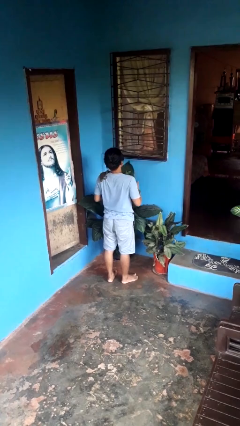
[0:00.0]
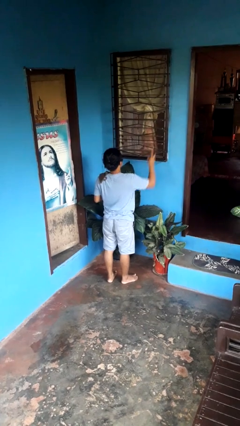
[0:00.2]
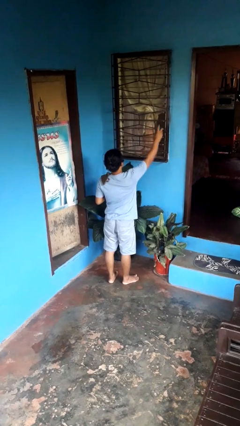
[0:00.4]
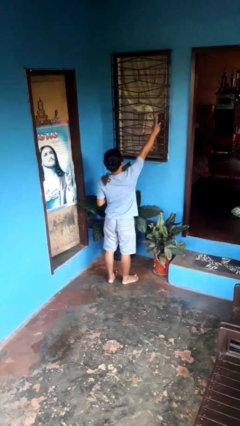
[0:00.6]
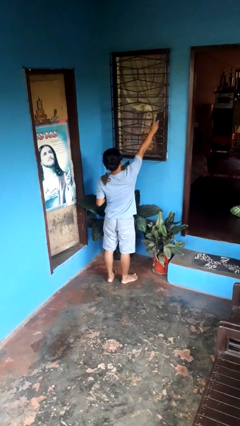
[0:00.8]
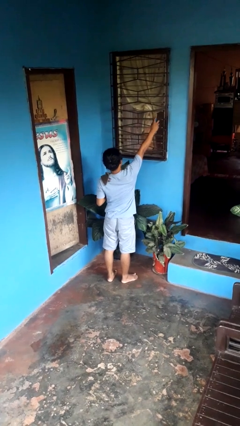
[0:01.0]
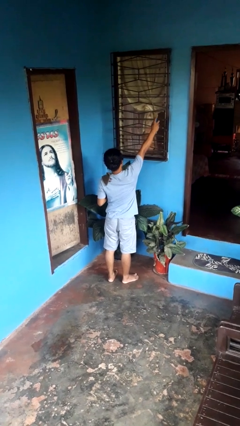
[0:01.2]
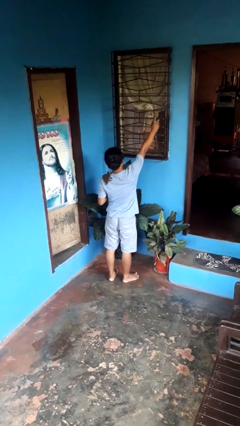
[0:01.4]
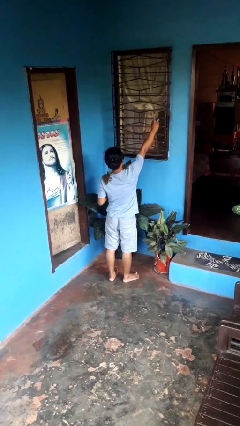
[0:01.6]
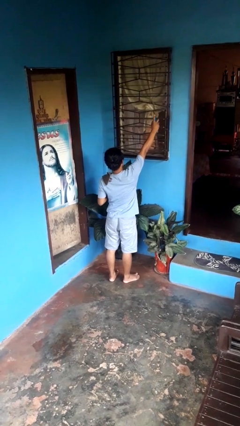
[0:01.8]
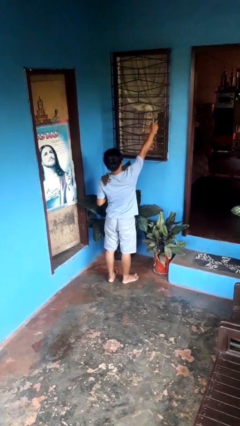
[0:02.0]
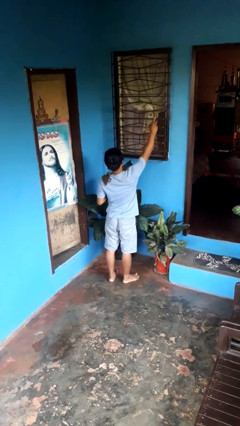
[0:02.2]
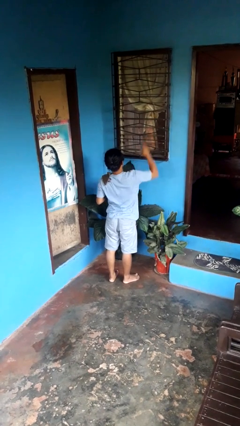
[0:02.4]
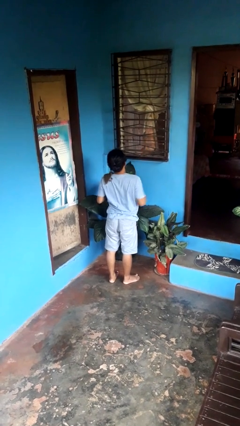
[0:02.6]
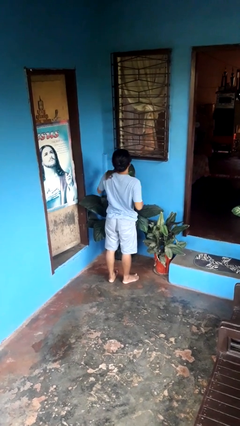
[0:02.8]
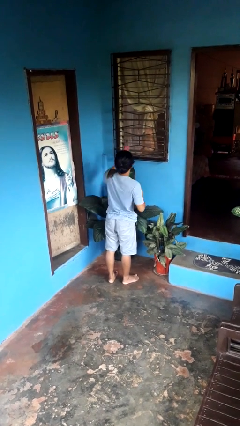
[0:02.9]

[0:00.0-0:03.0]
person sprays from bottle

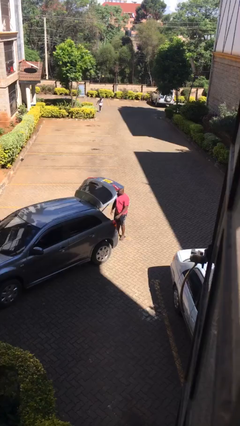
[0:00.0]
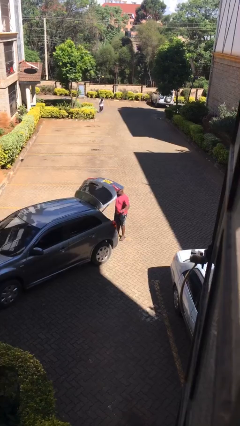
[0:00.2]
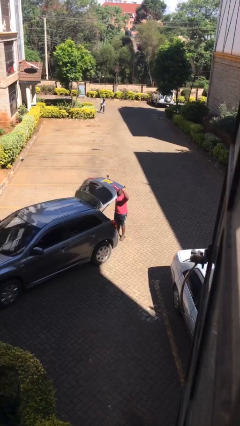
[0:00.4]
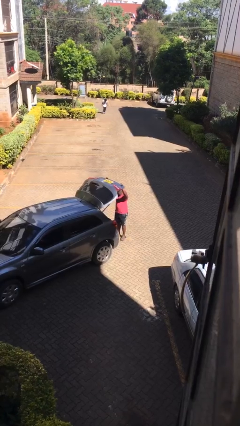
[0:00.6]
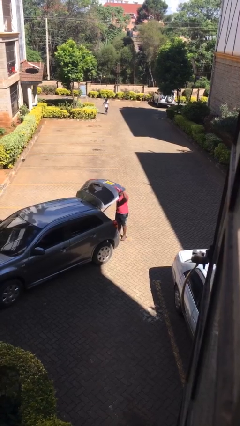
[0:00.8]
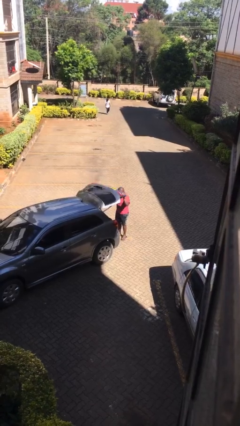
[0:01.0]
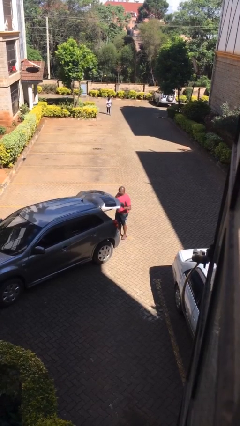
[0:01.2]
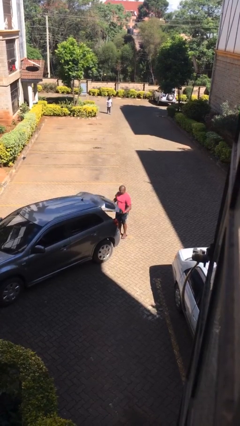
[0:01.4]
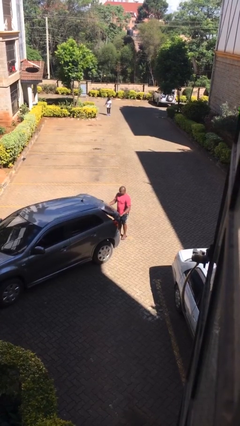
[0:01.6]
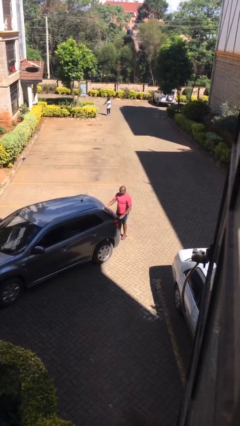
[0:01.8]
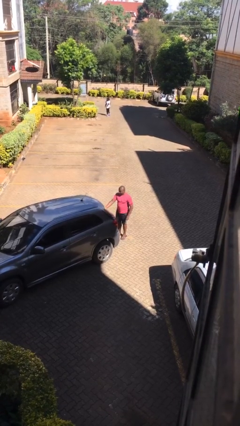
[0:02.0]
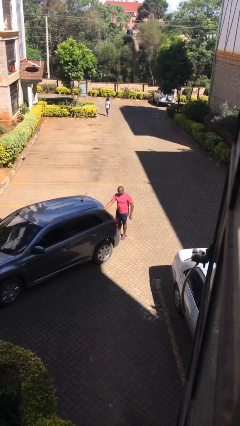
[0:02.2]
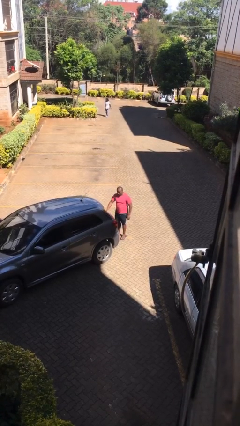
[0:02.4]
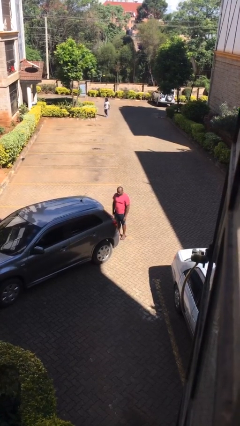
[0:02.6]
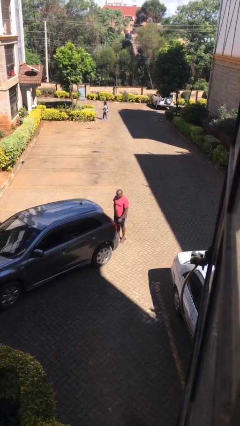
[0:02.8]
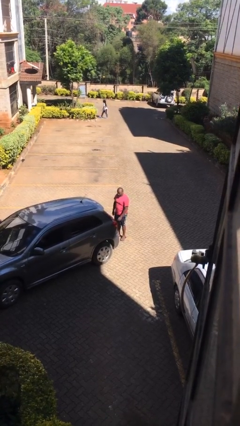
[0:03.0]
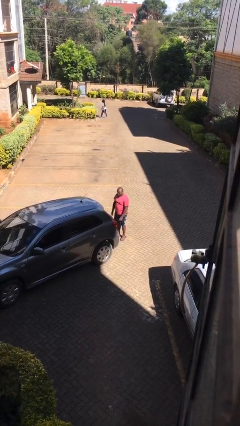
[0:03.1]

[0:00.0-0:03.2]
person closes car trunk

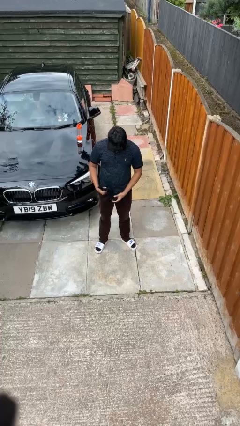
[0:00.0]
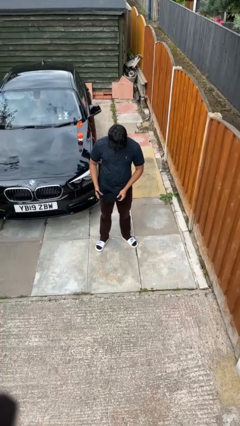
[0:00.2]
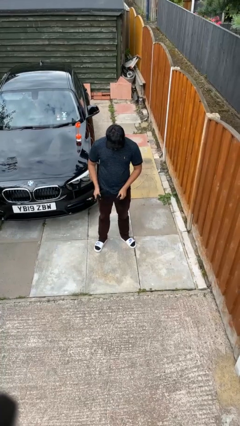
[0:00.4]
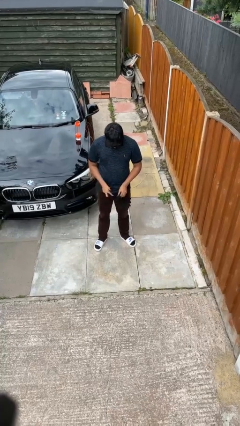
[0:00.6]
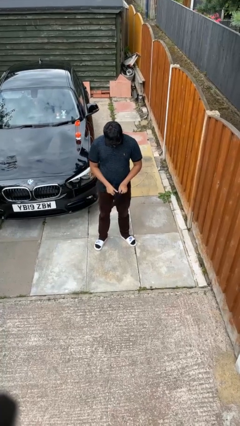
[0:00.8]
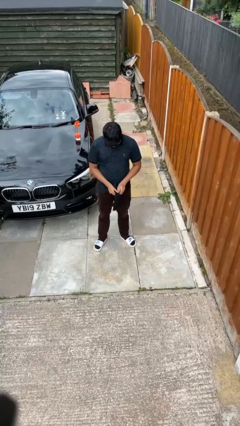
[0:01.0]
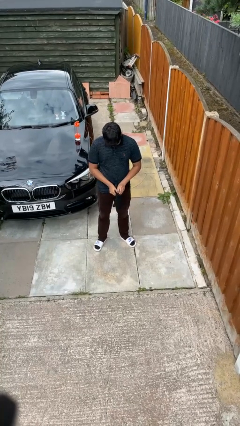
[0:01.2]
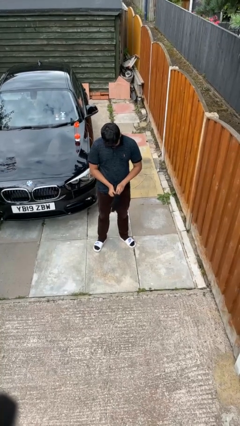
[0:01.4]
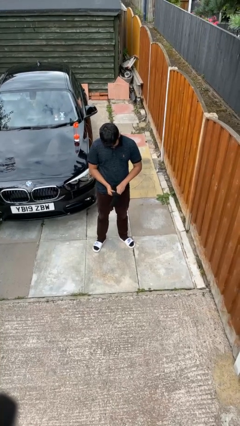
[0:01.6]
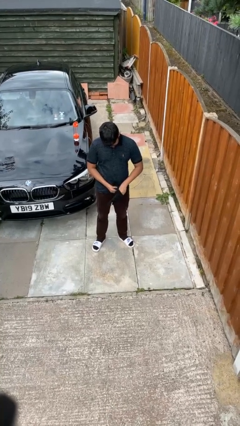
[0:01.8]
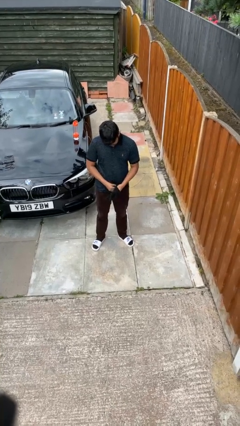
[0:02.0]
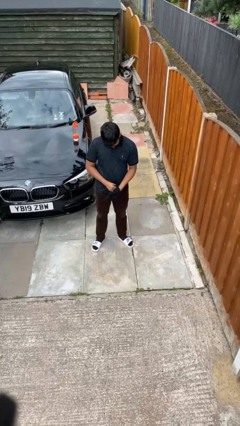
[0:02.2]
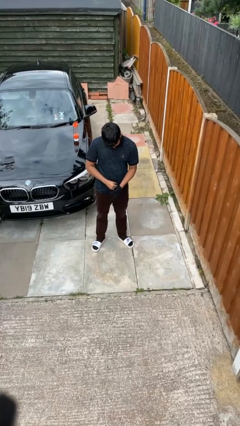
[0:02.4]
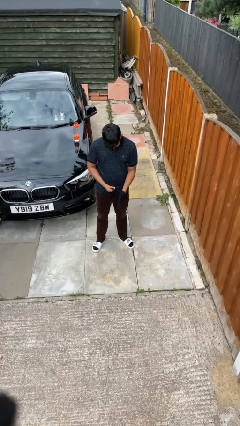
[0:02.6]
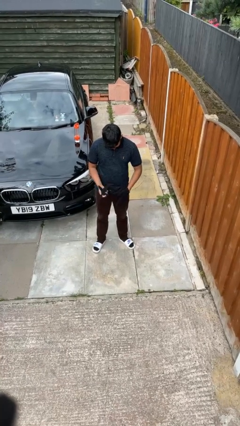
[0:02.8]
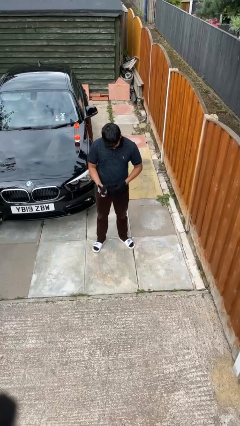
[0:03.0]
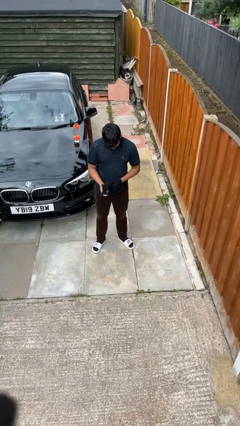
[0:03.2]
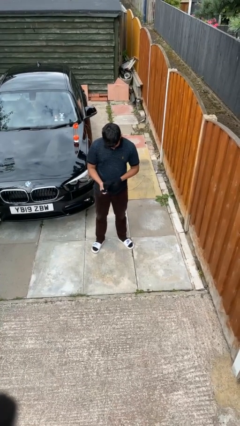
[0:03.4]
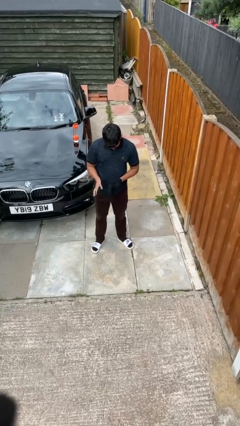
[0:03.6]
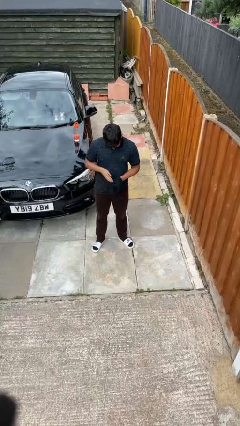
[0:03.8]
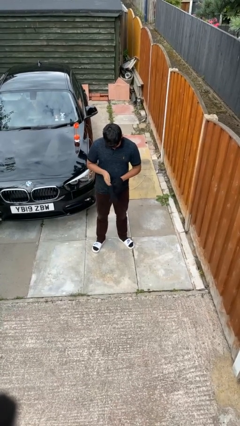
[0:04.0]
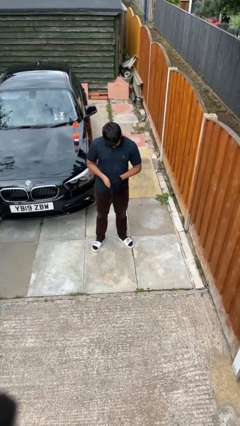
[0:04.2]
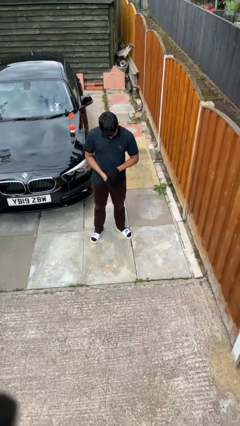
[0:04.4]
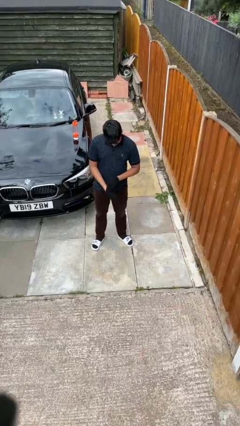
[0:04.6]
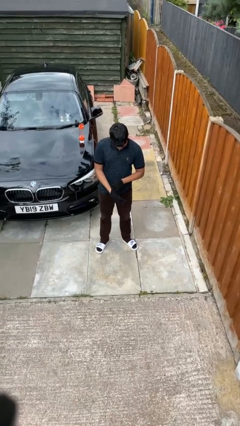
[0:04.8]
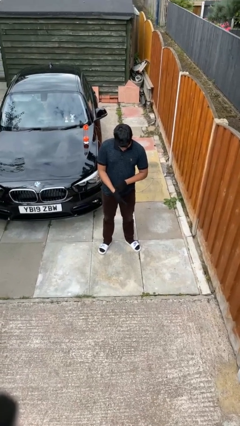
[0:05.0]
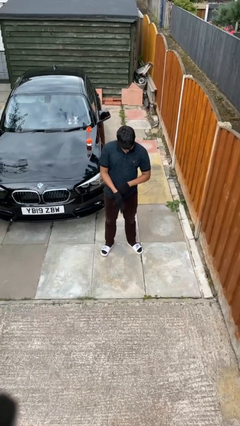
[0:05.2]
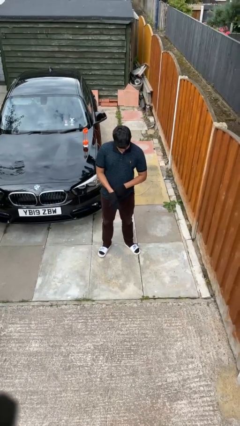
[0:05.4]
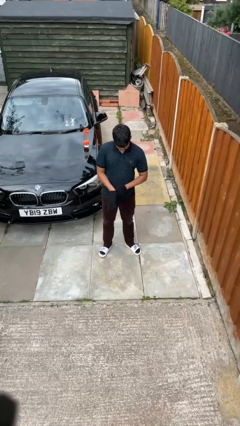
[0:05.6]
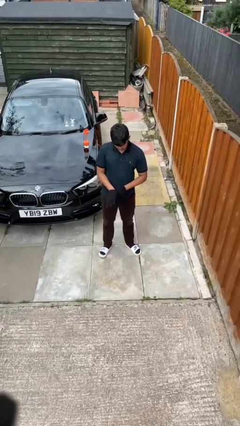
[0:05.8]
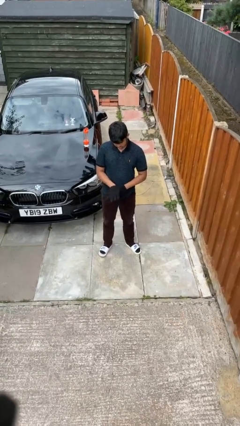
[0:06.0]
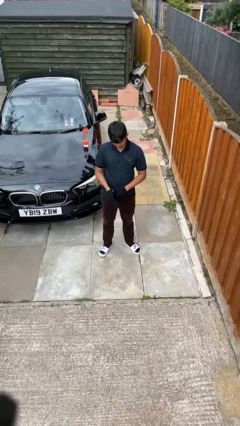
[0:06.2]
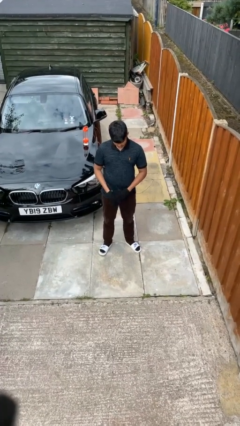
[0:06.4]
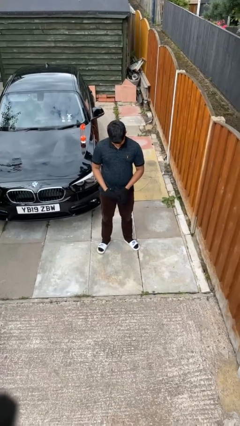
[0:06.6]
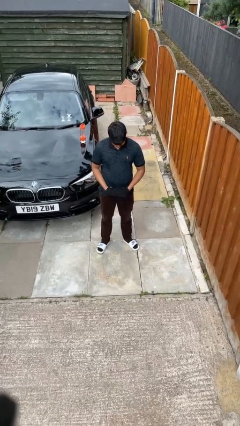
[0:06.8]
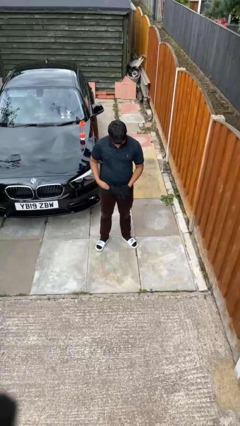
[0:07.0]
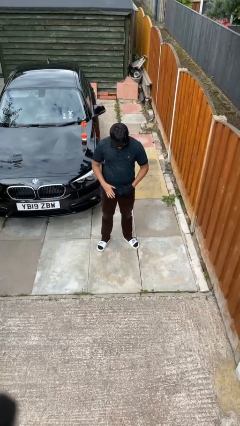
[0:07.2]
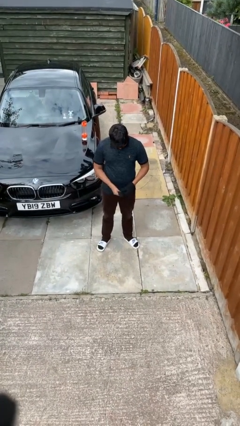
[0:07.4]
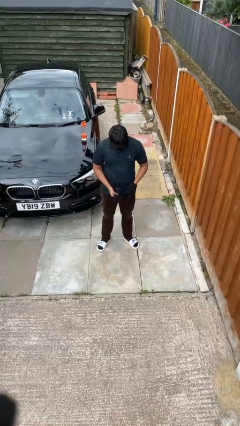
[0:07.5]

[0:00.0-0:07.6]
person puts on gloves

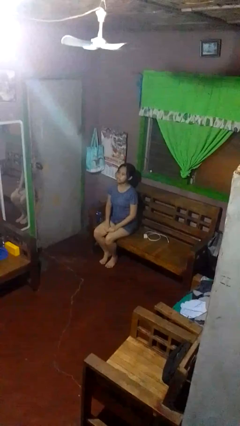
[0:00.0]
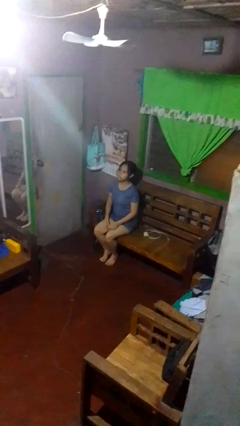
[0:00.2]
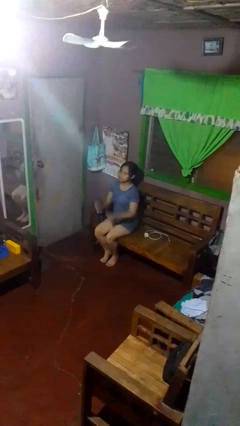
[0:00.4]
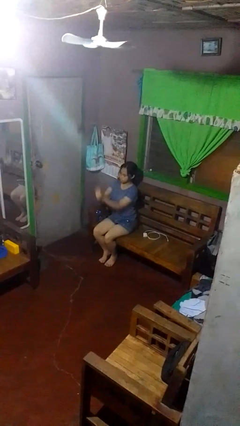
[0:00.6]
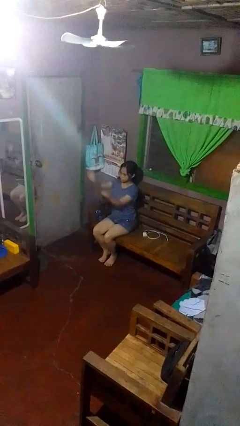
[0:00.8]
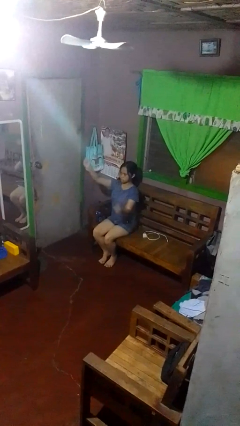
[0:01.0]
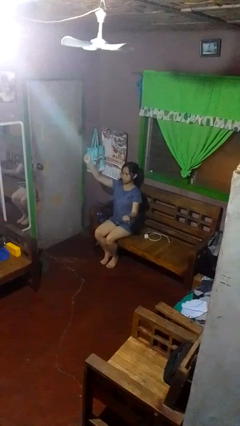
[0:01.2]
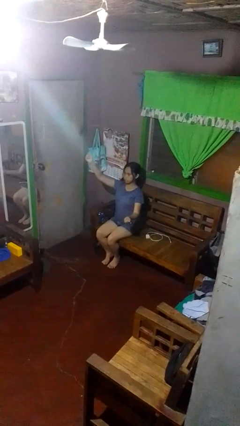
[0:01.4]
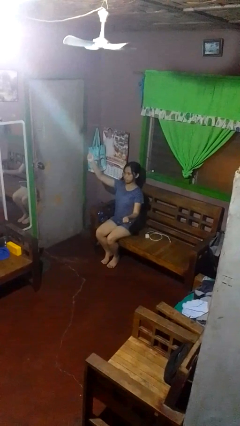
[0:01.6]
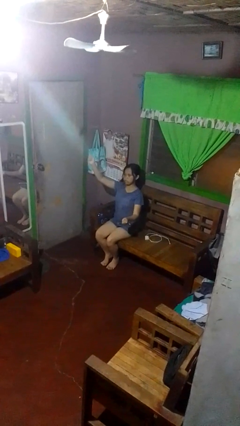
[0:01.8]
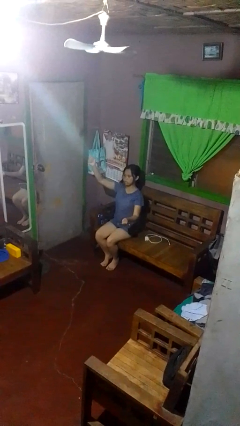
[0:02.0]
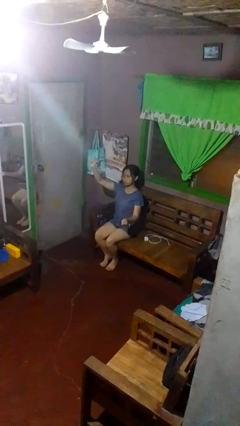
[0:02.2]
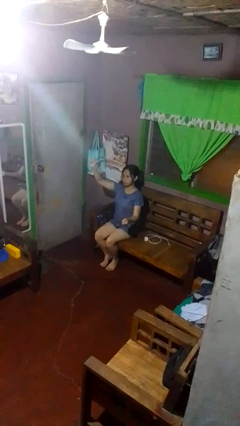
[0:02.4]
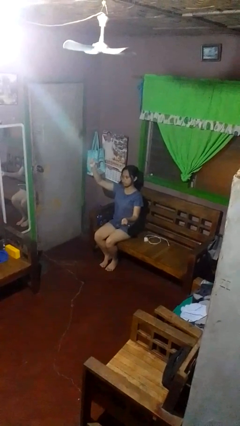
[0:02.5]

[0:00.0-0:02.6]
person gestures zoom in

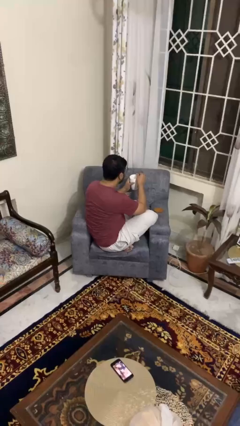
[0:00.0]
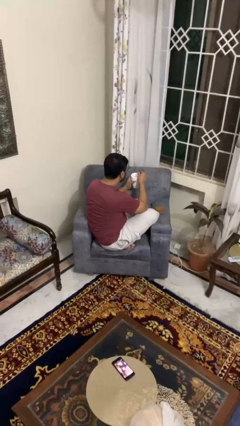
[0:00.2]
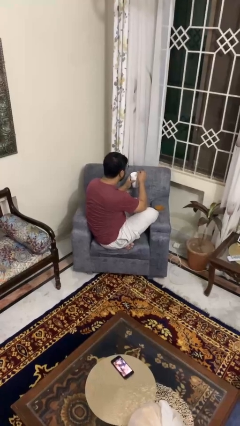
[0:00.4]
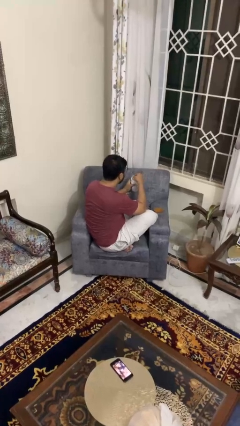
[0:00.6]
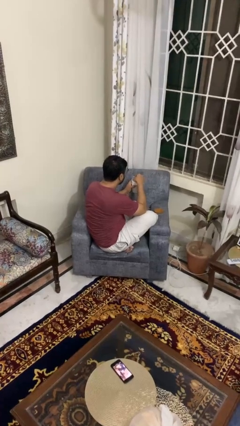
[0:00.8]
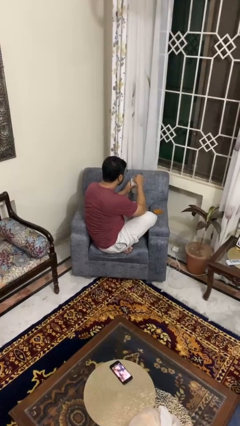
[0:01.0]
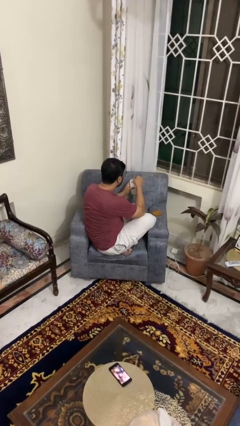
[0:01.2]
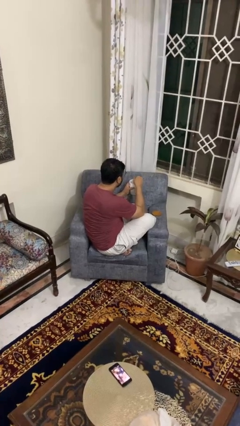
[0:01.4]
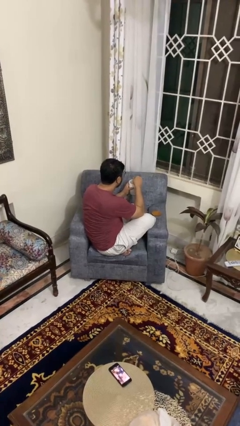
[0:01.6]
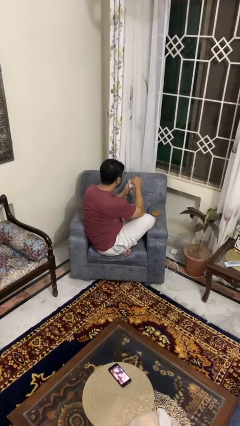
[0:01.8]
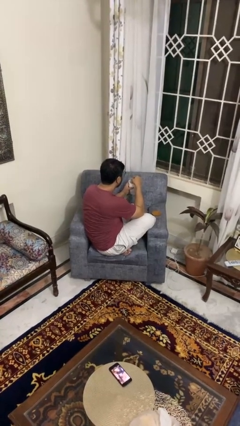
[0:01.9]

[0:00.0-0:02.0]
person stirs mug
